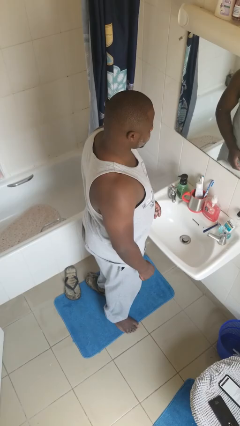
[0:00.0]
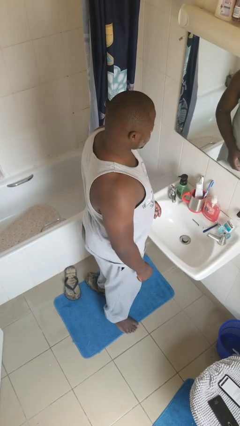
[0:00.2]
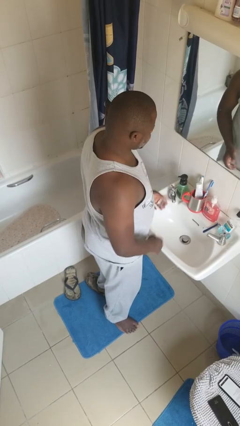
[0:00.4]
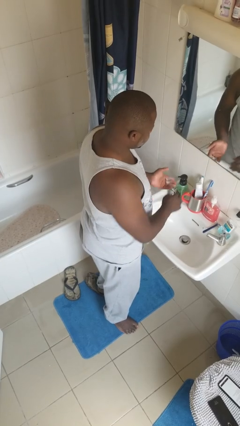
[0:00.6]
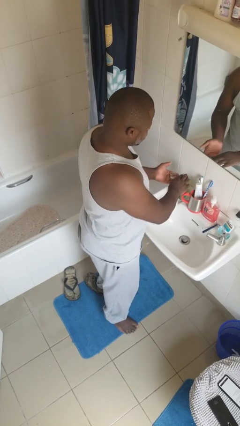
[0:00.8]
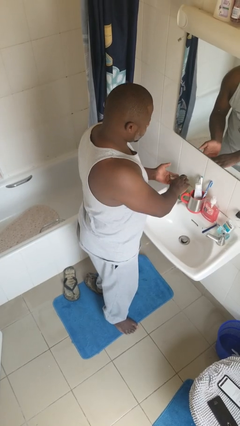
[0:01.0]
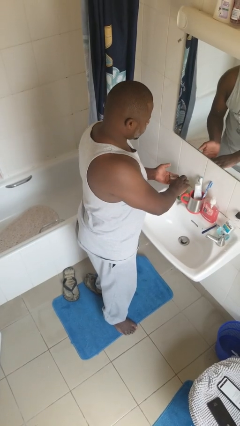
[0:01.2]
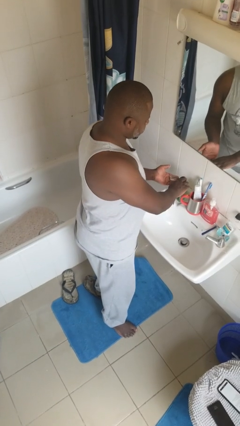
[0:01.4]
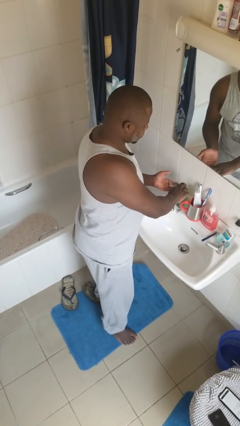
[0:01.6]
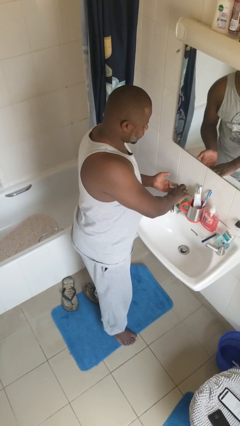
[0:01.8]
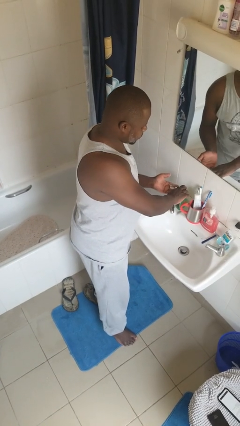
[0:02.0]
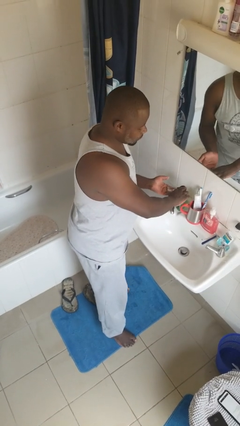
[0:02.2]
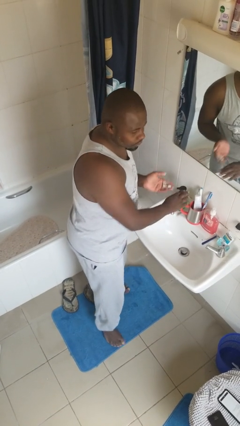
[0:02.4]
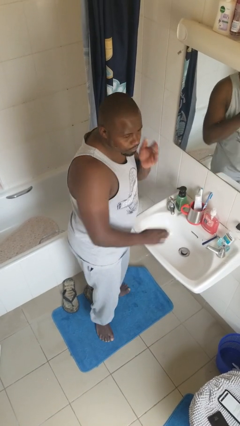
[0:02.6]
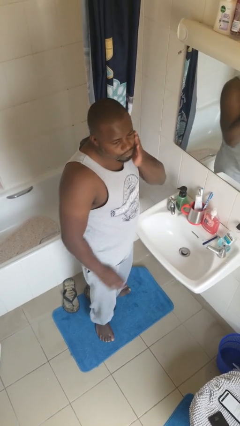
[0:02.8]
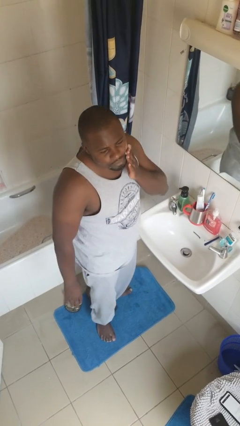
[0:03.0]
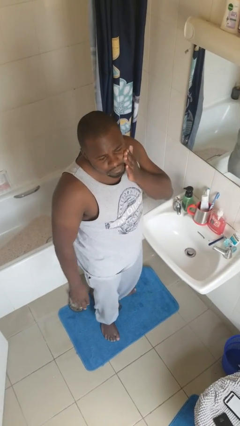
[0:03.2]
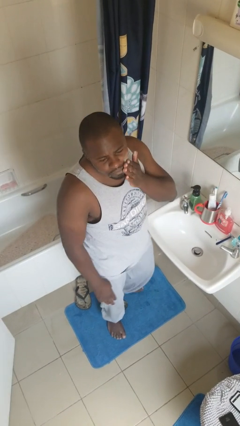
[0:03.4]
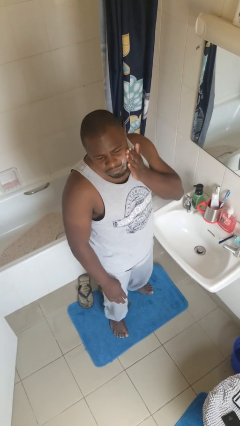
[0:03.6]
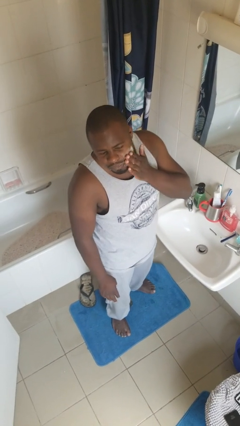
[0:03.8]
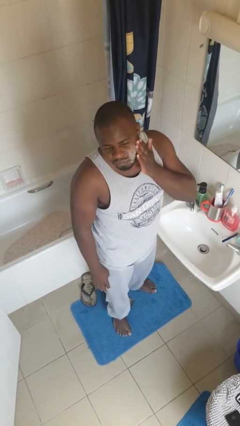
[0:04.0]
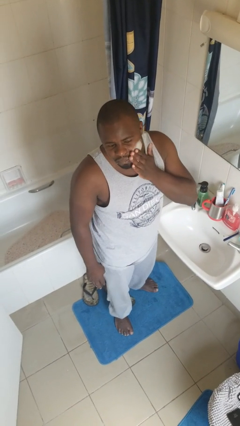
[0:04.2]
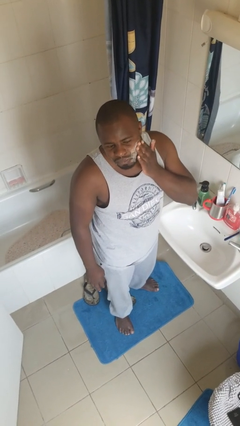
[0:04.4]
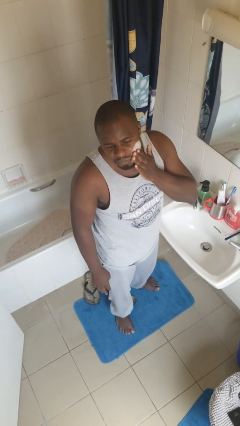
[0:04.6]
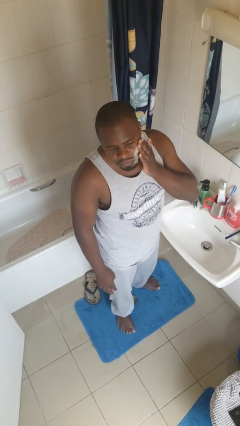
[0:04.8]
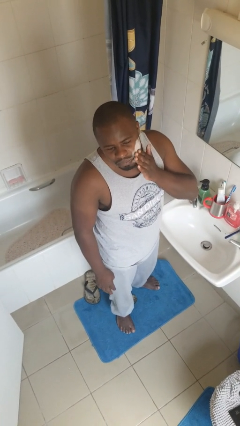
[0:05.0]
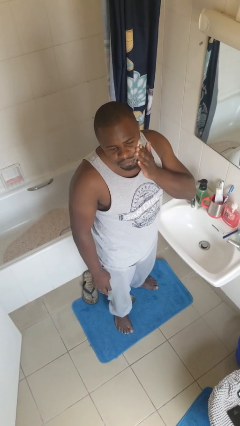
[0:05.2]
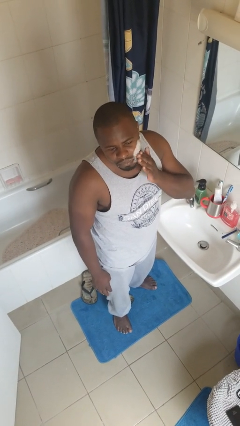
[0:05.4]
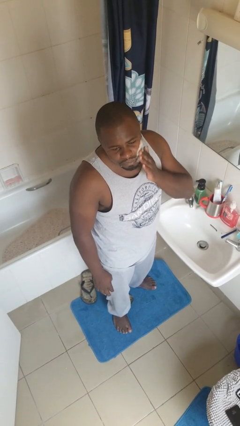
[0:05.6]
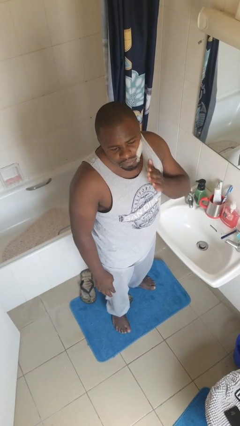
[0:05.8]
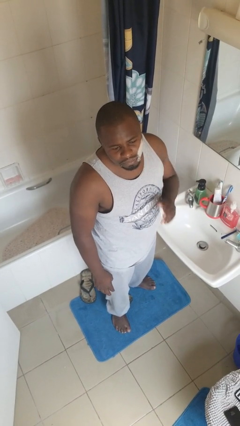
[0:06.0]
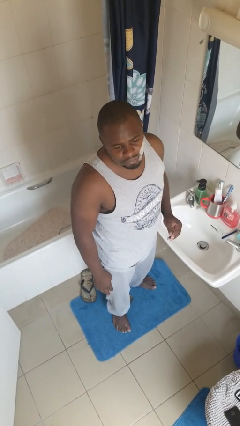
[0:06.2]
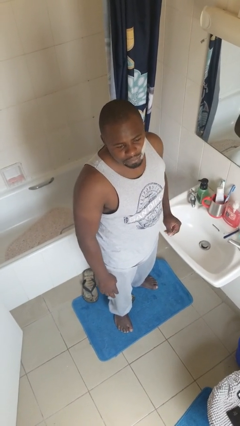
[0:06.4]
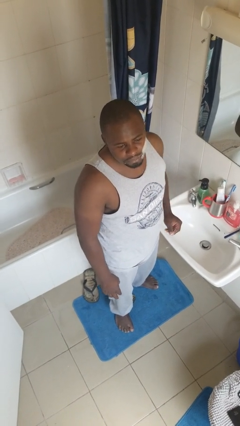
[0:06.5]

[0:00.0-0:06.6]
person applies shaving cream

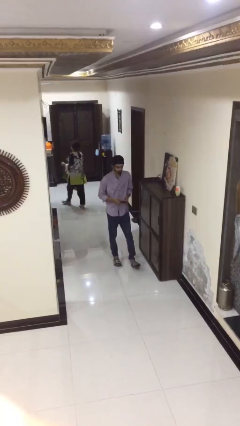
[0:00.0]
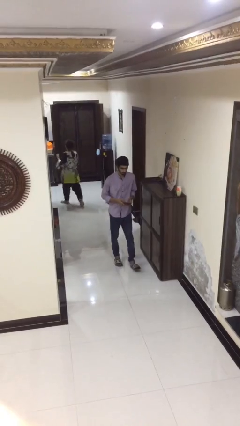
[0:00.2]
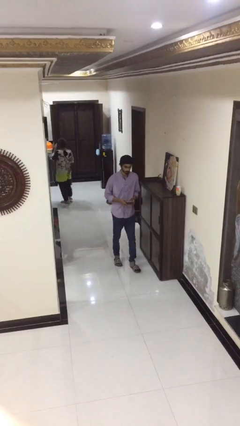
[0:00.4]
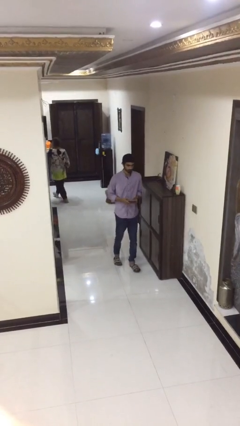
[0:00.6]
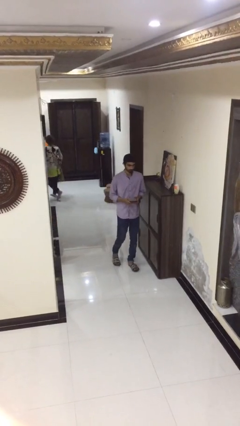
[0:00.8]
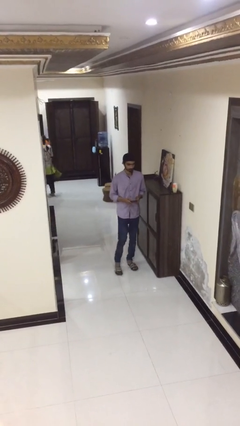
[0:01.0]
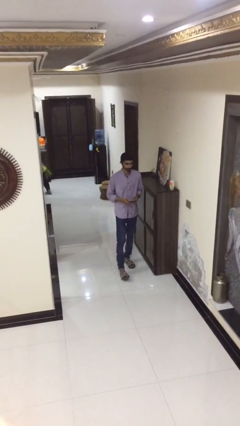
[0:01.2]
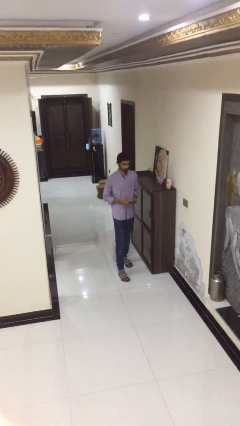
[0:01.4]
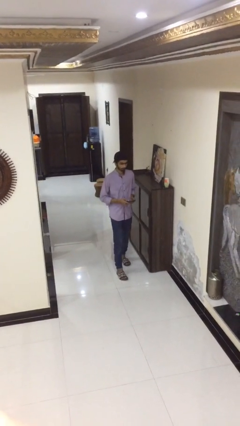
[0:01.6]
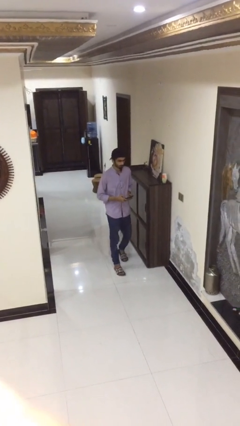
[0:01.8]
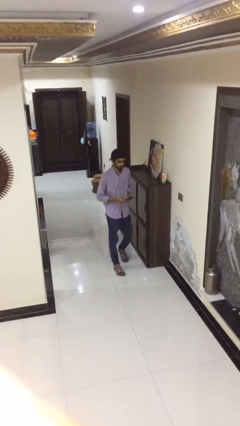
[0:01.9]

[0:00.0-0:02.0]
person texts on phone

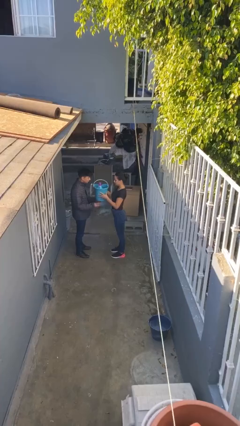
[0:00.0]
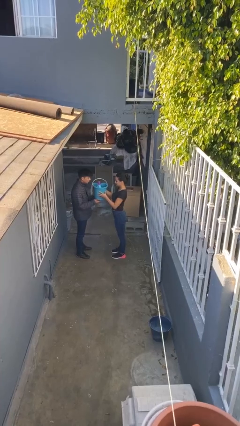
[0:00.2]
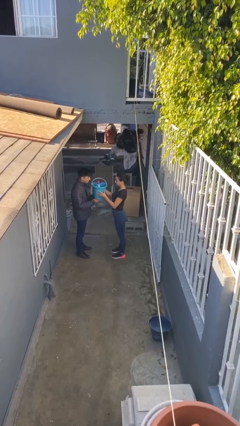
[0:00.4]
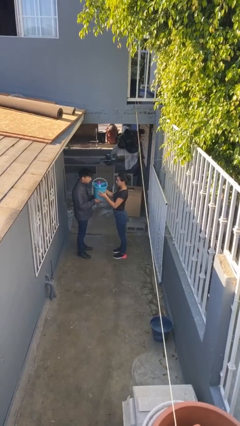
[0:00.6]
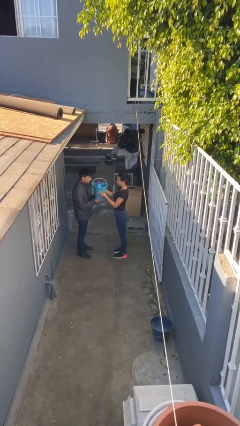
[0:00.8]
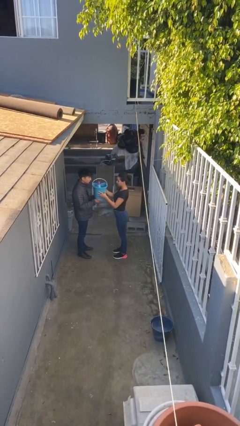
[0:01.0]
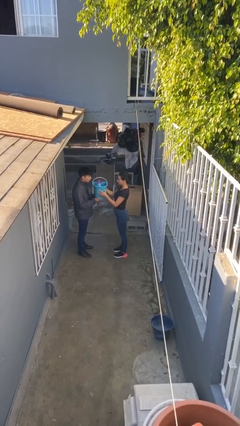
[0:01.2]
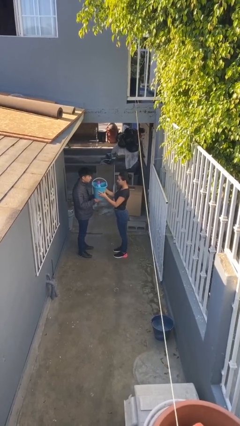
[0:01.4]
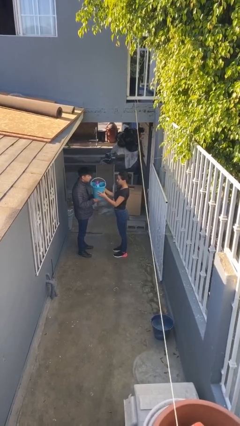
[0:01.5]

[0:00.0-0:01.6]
person transfers object to person

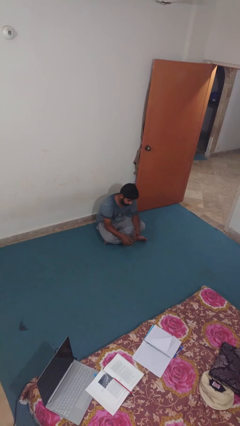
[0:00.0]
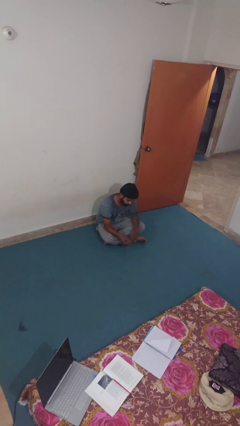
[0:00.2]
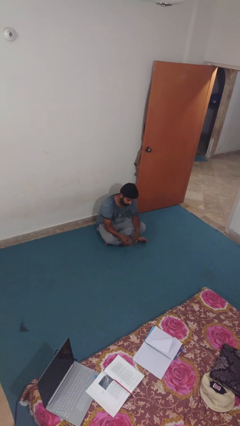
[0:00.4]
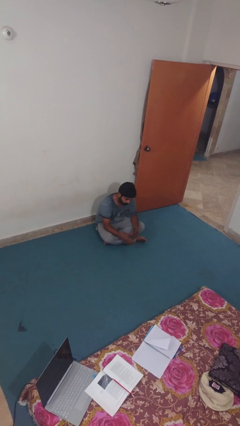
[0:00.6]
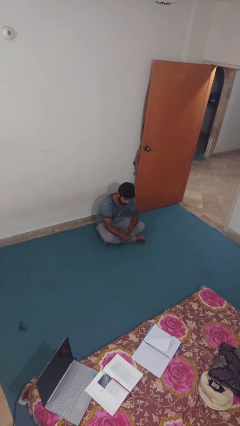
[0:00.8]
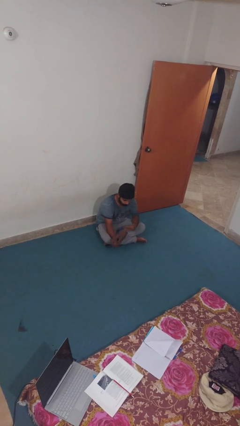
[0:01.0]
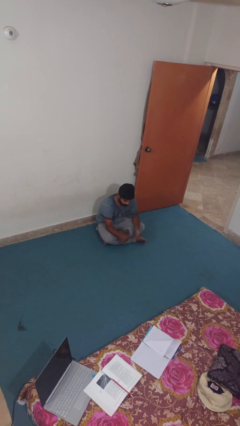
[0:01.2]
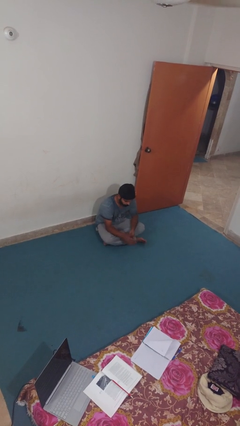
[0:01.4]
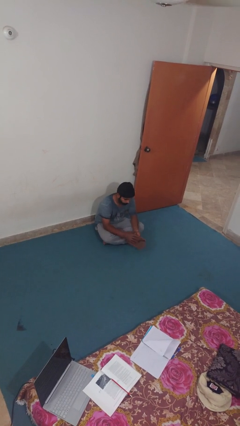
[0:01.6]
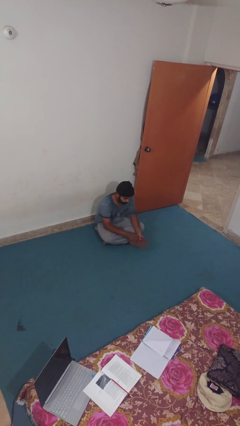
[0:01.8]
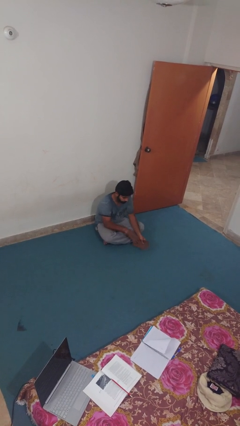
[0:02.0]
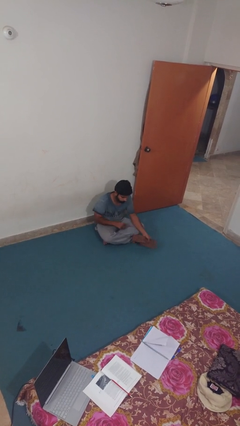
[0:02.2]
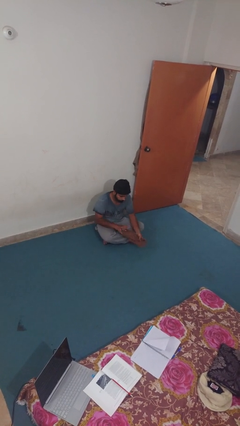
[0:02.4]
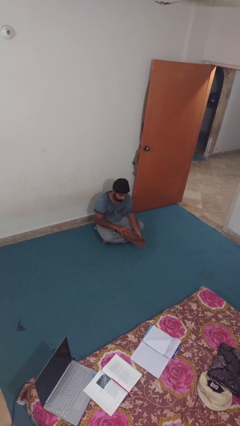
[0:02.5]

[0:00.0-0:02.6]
person takes off gloves

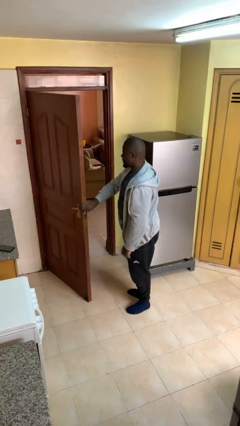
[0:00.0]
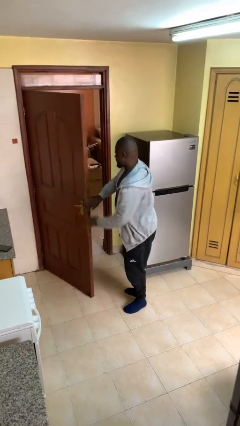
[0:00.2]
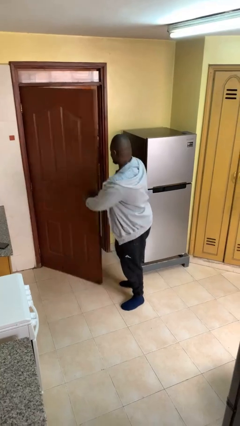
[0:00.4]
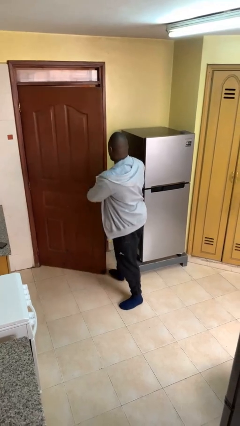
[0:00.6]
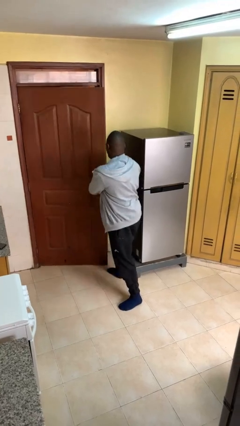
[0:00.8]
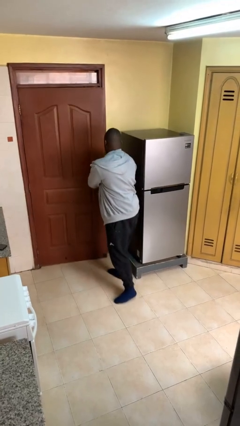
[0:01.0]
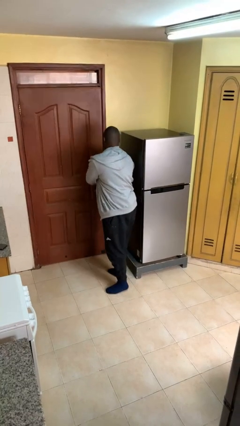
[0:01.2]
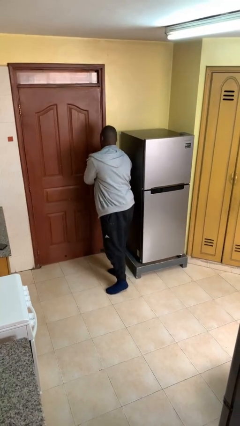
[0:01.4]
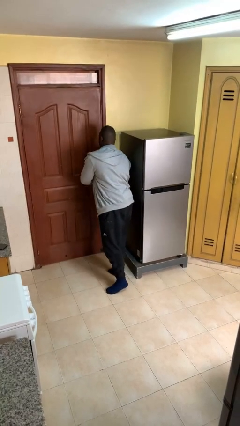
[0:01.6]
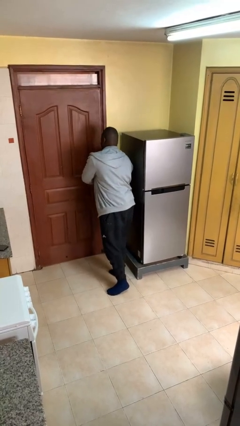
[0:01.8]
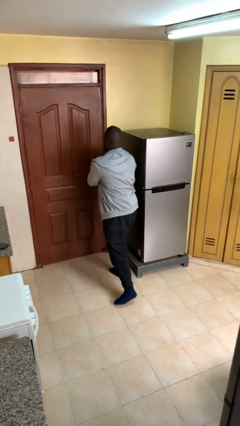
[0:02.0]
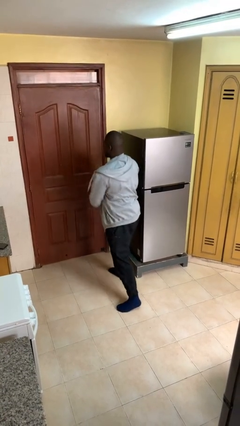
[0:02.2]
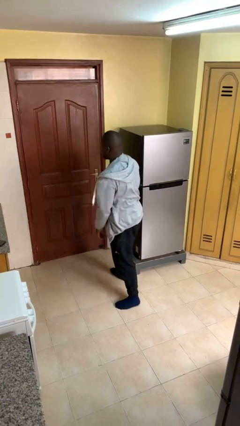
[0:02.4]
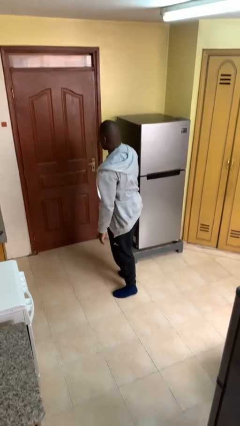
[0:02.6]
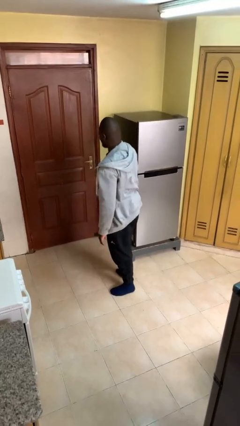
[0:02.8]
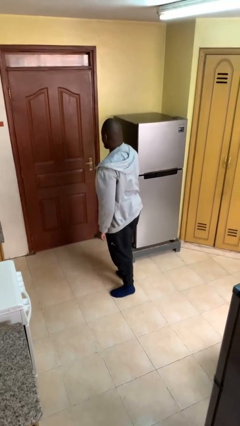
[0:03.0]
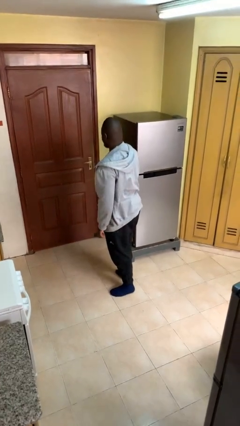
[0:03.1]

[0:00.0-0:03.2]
person closes facility door

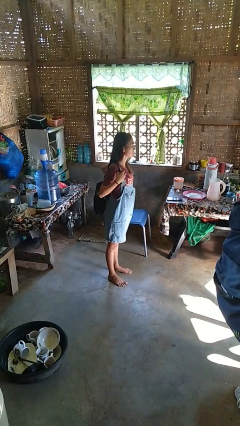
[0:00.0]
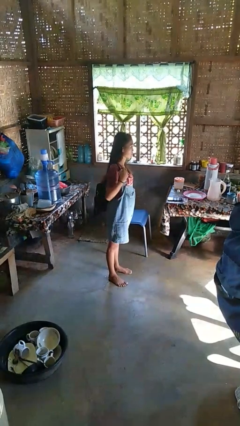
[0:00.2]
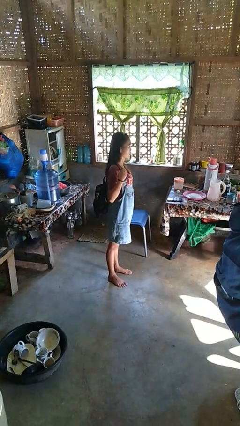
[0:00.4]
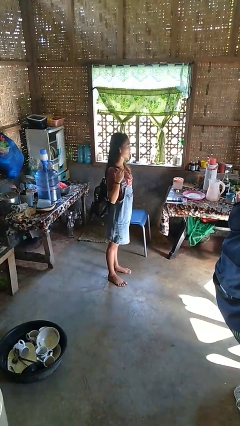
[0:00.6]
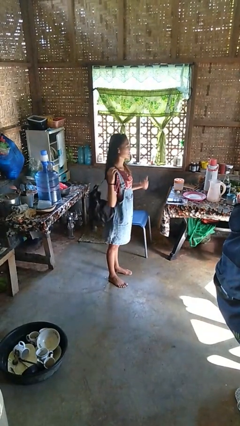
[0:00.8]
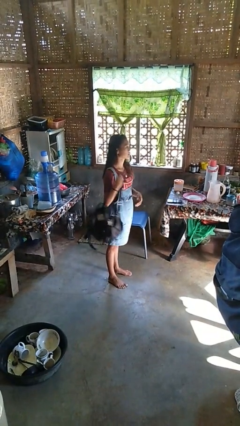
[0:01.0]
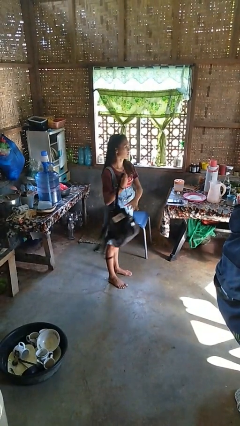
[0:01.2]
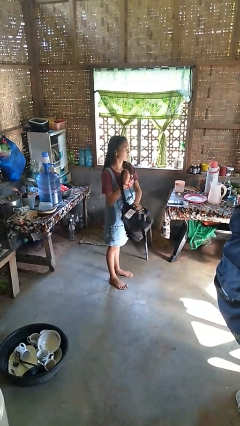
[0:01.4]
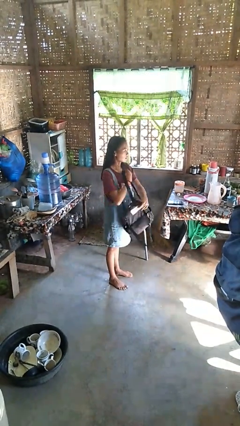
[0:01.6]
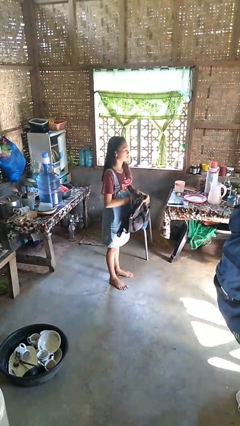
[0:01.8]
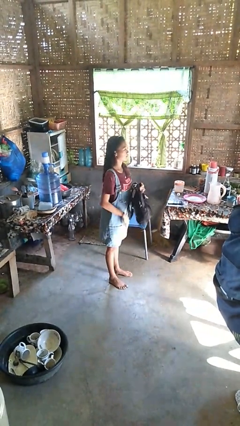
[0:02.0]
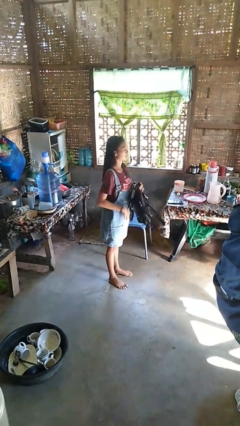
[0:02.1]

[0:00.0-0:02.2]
person takes off backpack
